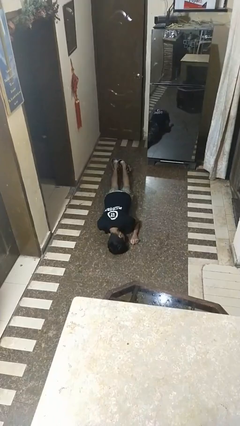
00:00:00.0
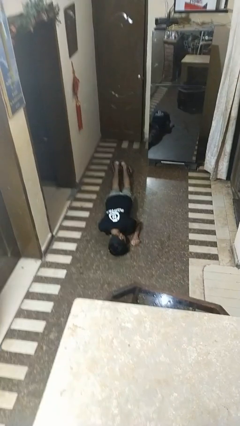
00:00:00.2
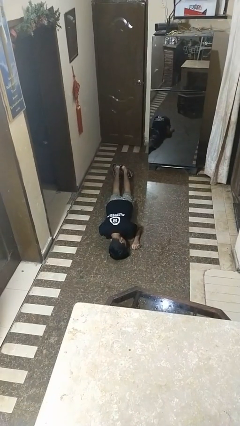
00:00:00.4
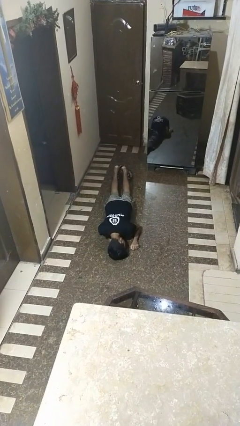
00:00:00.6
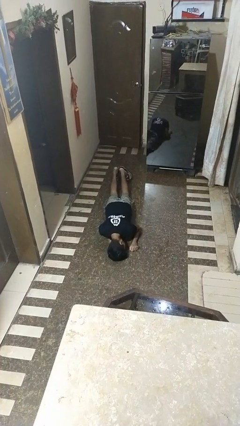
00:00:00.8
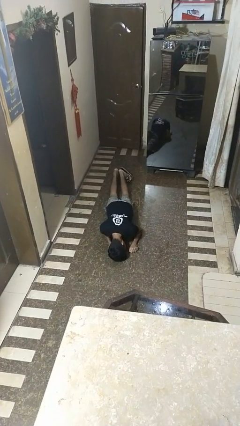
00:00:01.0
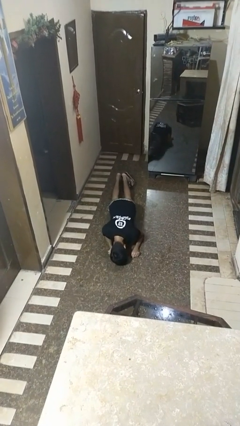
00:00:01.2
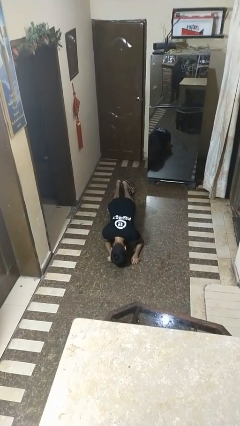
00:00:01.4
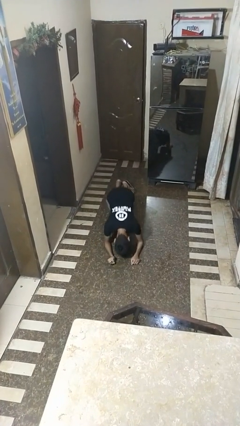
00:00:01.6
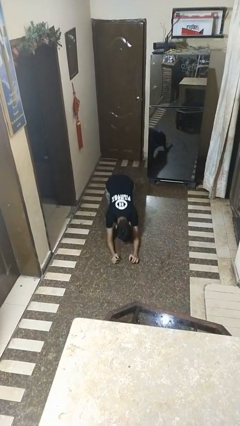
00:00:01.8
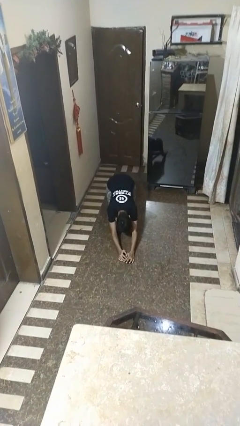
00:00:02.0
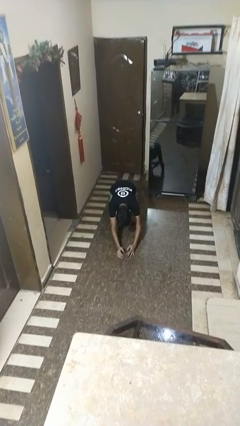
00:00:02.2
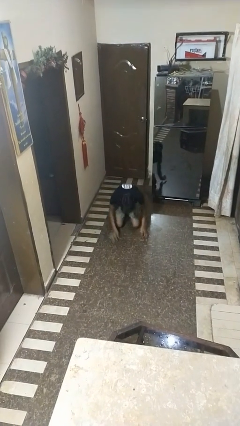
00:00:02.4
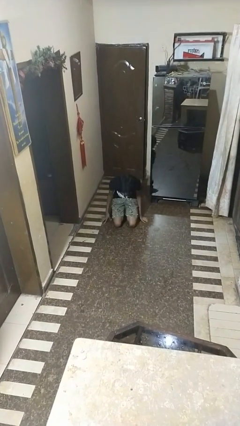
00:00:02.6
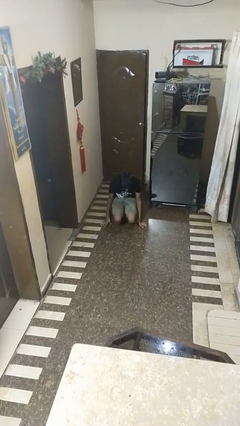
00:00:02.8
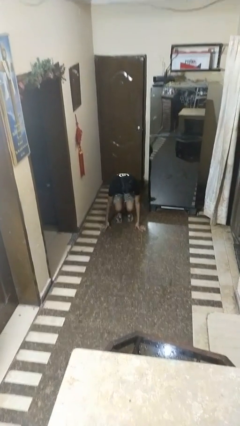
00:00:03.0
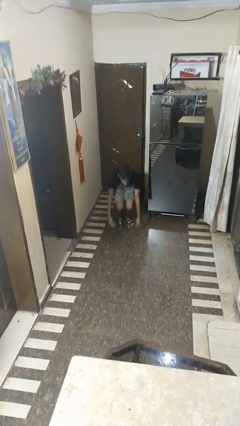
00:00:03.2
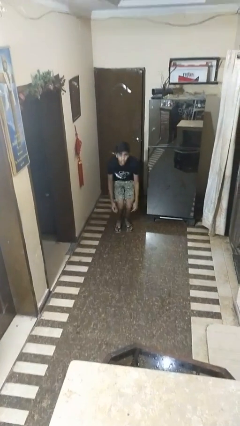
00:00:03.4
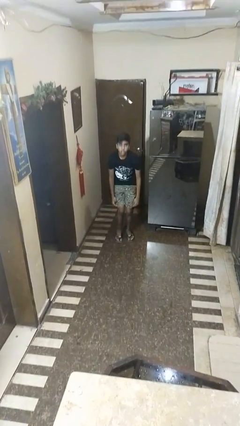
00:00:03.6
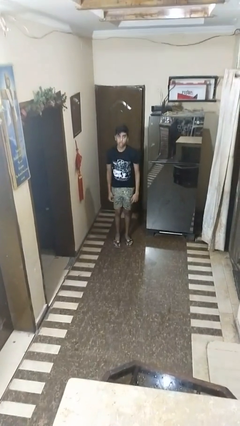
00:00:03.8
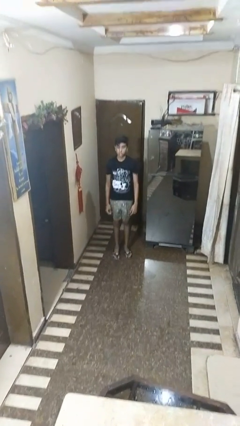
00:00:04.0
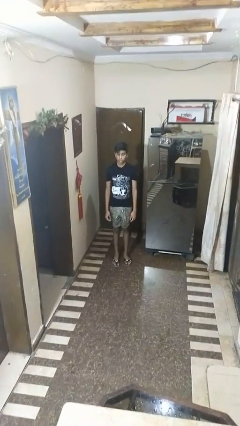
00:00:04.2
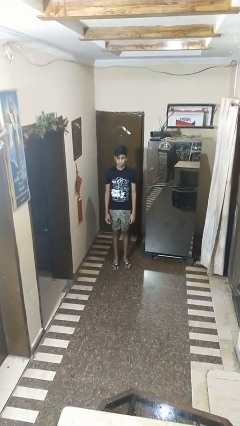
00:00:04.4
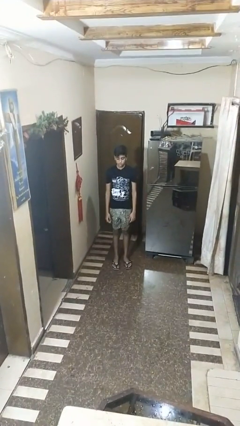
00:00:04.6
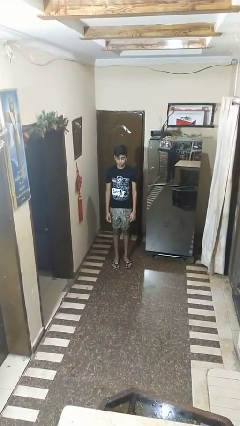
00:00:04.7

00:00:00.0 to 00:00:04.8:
person stands up from floor

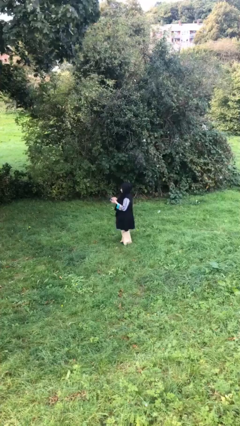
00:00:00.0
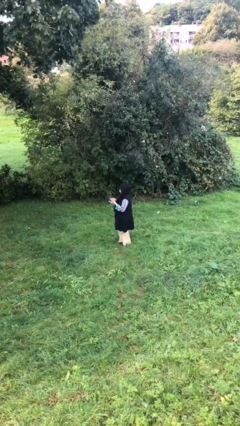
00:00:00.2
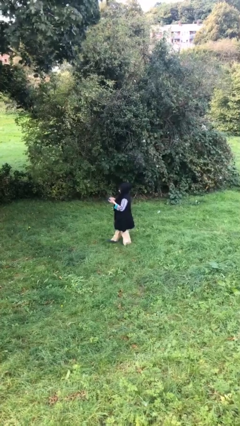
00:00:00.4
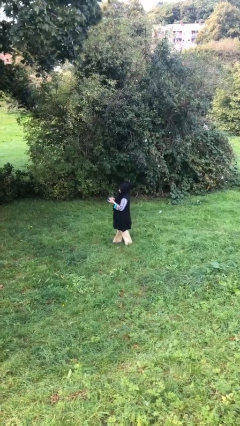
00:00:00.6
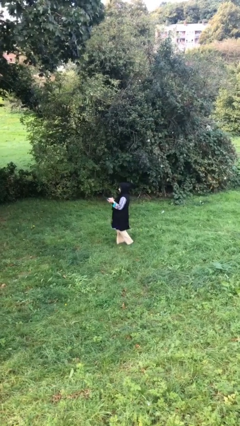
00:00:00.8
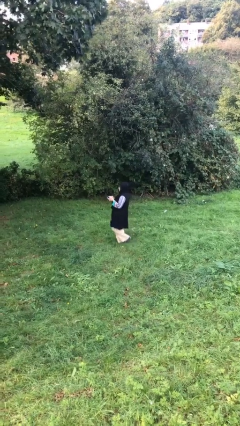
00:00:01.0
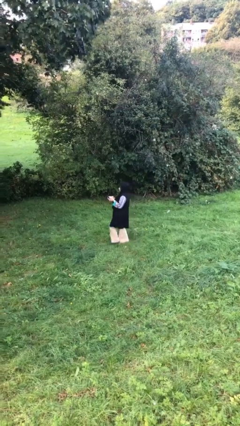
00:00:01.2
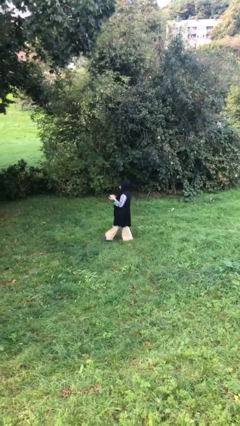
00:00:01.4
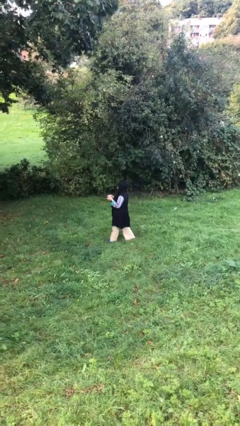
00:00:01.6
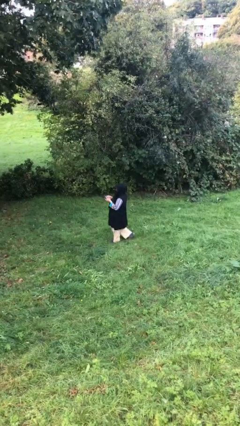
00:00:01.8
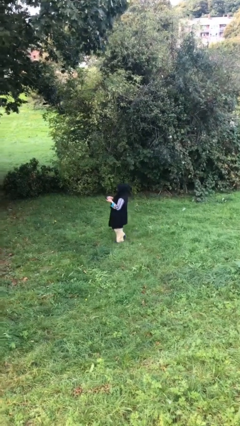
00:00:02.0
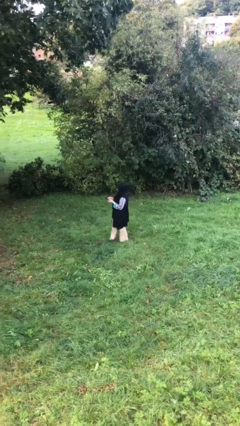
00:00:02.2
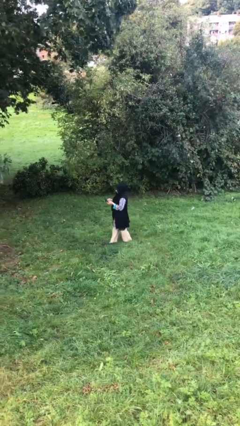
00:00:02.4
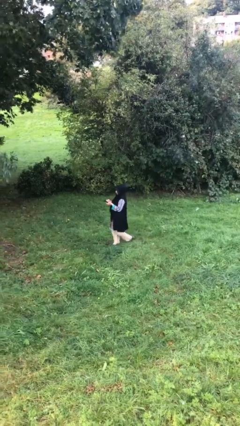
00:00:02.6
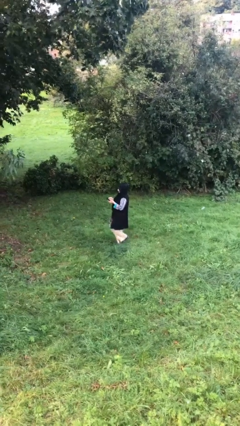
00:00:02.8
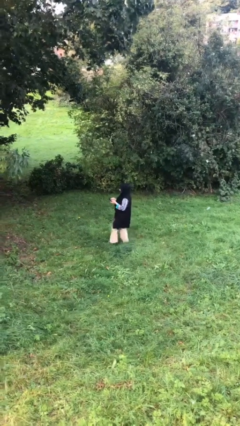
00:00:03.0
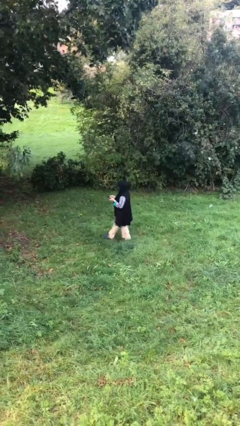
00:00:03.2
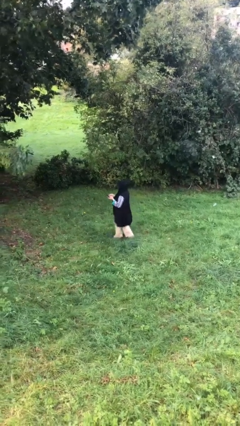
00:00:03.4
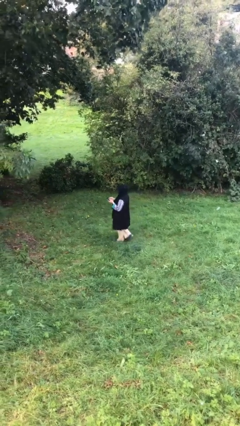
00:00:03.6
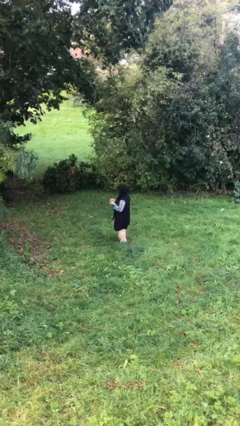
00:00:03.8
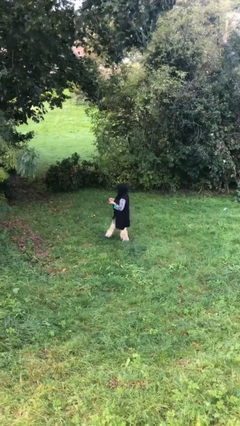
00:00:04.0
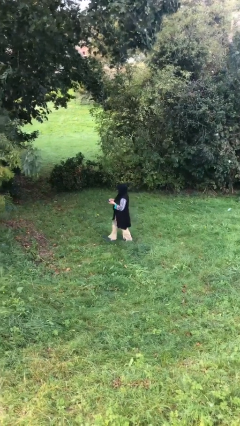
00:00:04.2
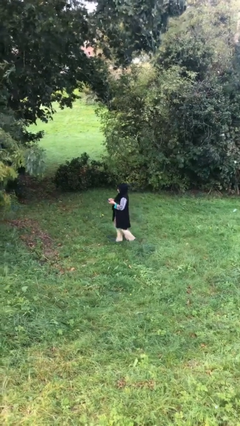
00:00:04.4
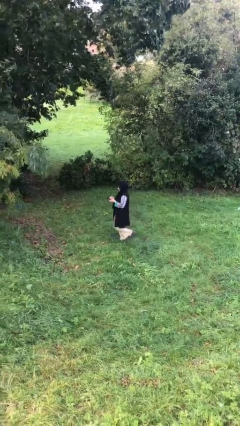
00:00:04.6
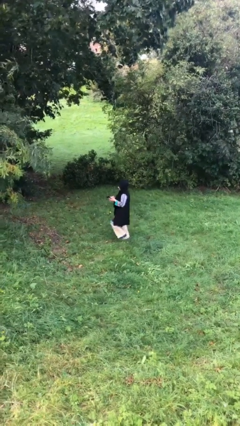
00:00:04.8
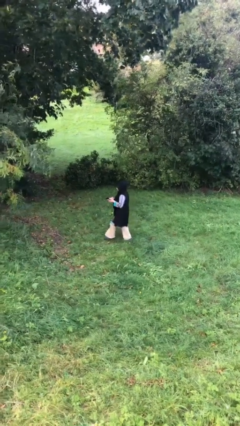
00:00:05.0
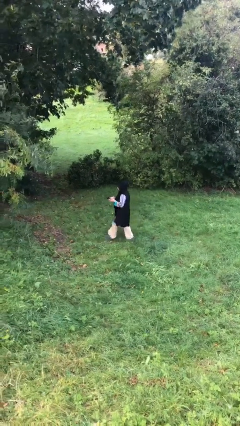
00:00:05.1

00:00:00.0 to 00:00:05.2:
person texts on phone

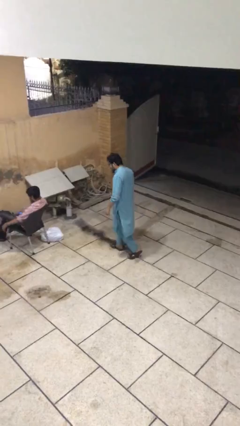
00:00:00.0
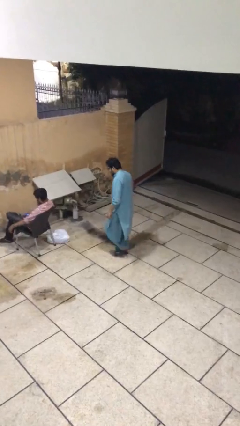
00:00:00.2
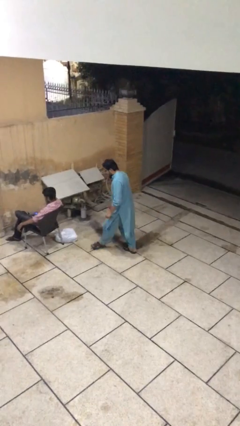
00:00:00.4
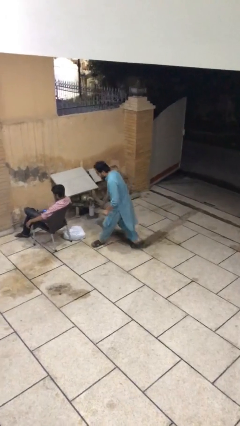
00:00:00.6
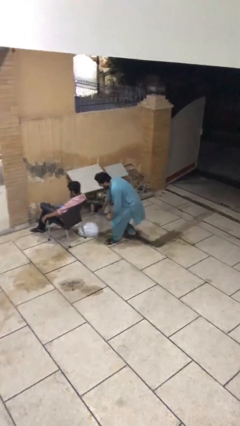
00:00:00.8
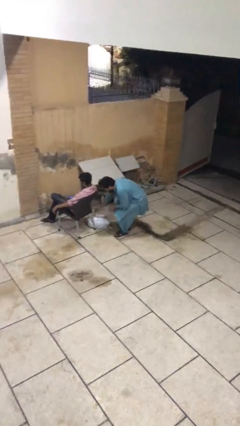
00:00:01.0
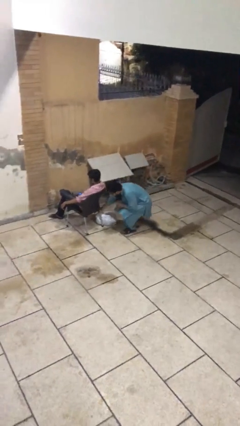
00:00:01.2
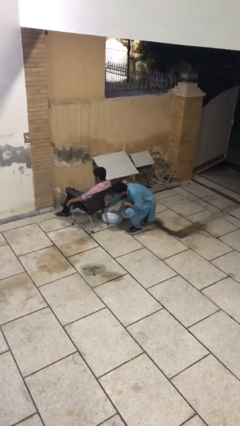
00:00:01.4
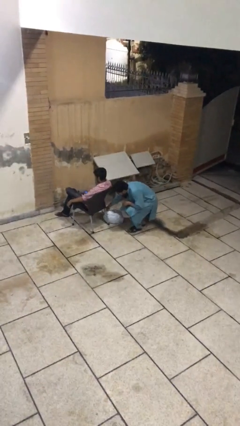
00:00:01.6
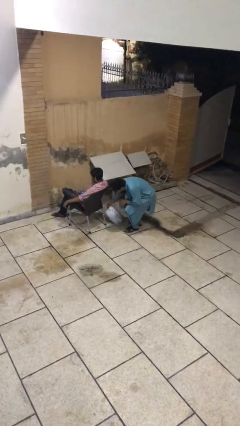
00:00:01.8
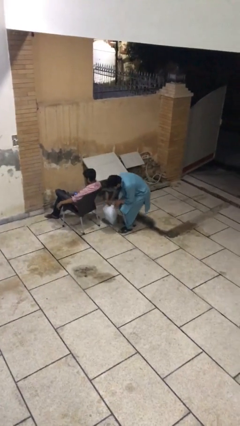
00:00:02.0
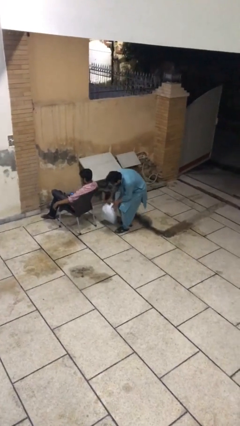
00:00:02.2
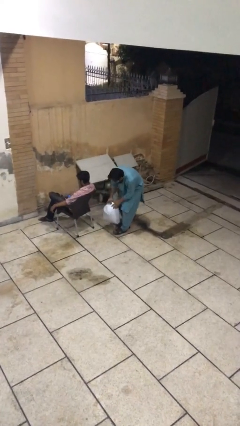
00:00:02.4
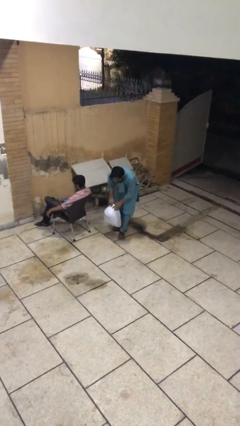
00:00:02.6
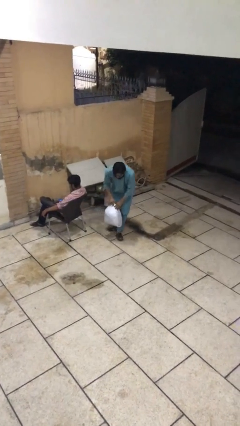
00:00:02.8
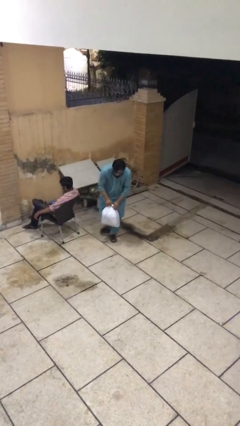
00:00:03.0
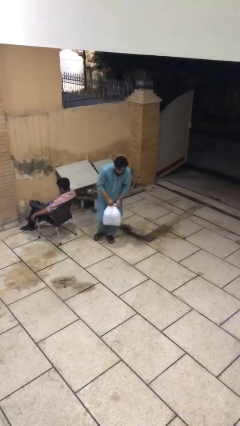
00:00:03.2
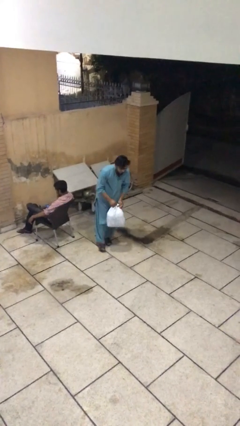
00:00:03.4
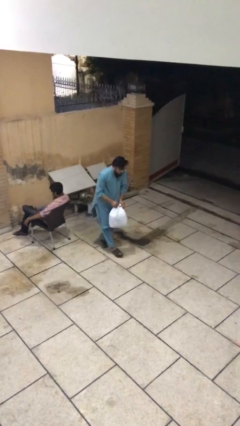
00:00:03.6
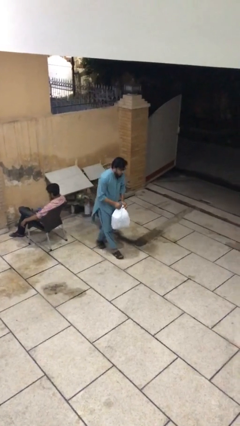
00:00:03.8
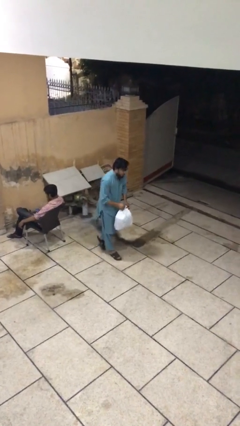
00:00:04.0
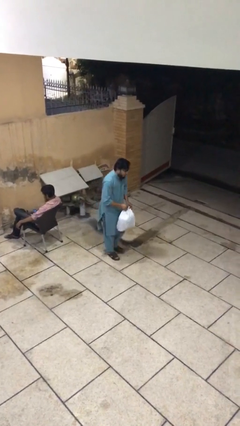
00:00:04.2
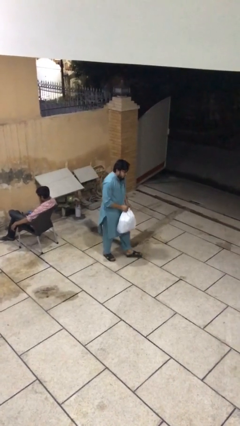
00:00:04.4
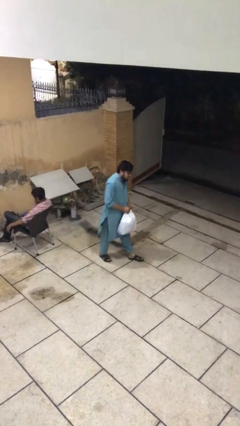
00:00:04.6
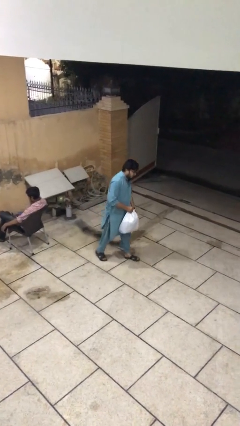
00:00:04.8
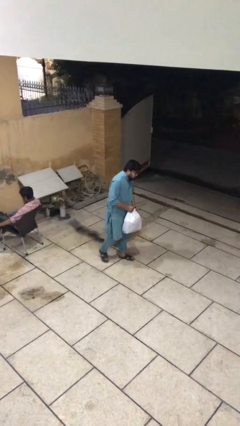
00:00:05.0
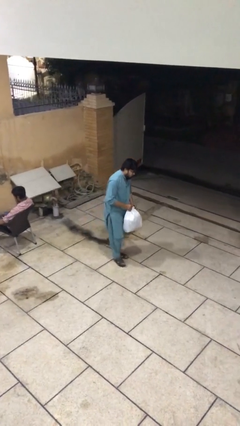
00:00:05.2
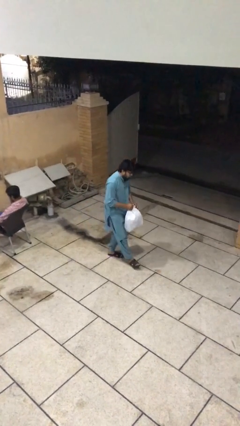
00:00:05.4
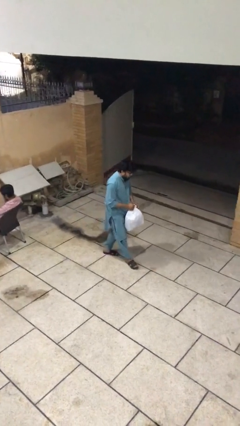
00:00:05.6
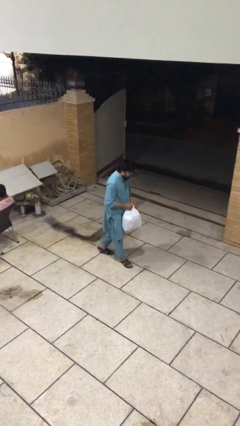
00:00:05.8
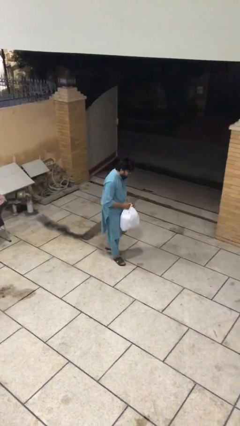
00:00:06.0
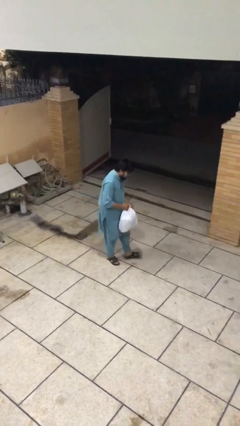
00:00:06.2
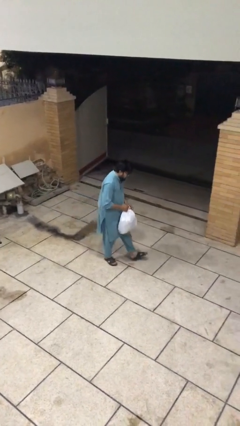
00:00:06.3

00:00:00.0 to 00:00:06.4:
person steals object from person

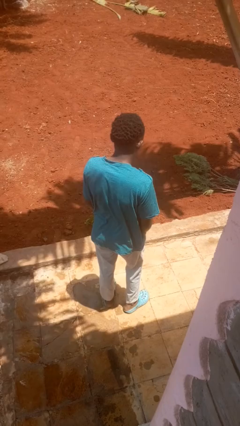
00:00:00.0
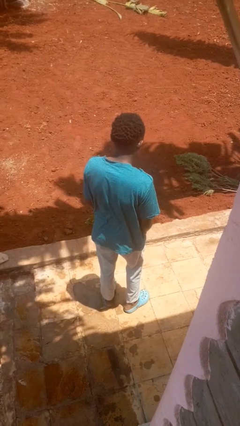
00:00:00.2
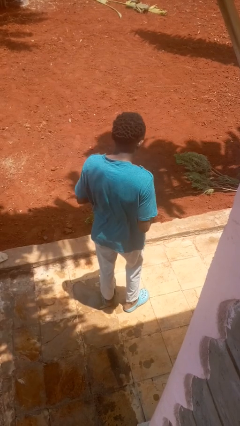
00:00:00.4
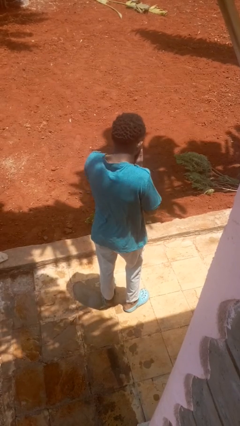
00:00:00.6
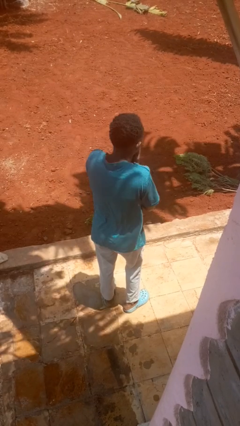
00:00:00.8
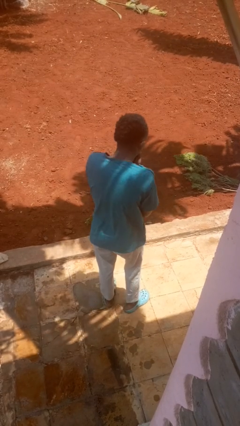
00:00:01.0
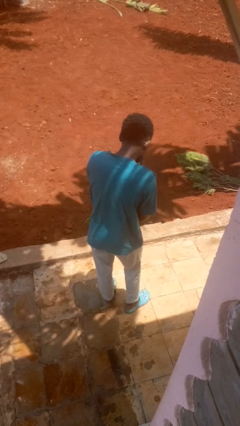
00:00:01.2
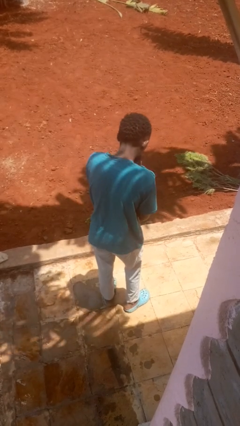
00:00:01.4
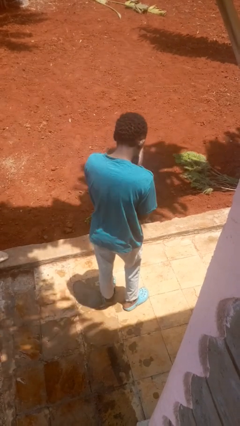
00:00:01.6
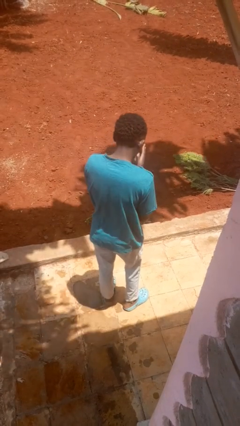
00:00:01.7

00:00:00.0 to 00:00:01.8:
person sneezes into hand
